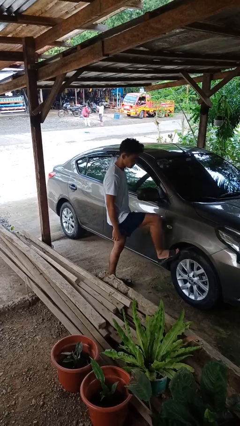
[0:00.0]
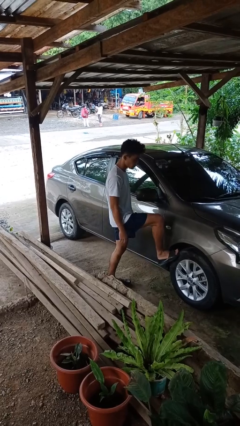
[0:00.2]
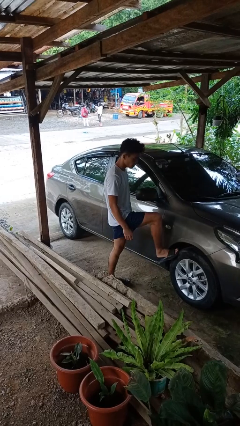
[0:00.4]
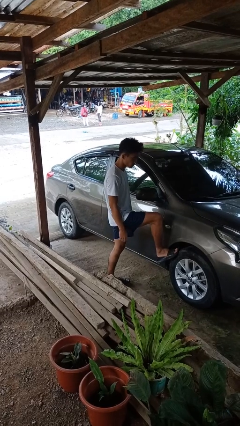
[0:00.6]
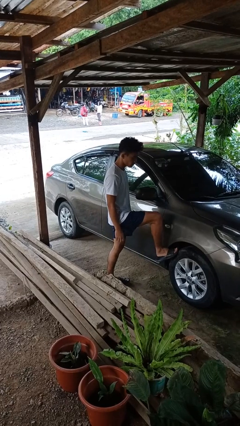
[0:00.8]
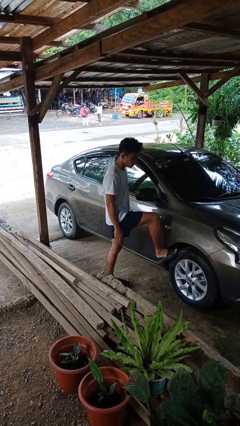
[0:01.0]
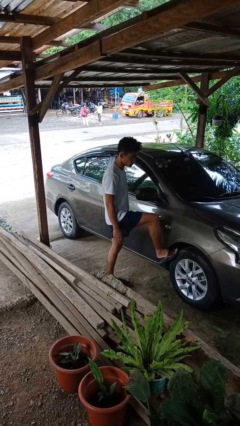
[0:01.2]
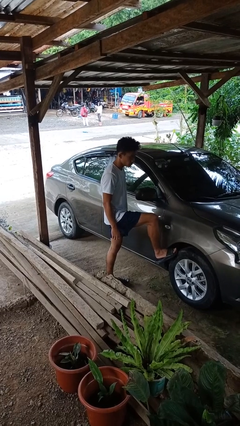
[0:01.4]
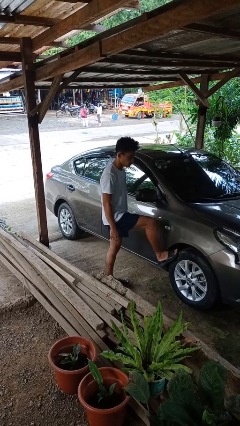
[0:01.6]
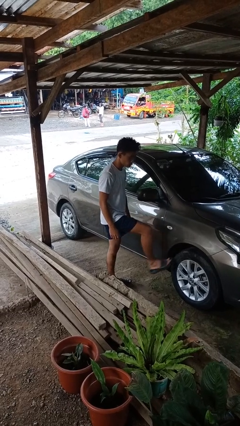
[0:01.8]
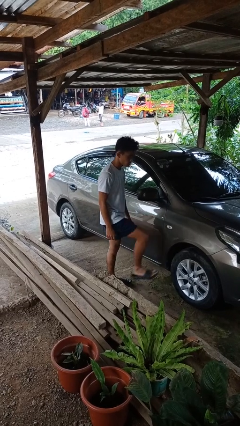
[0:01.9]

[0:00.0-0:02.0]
person kicks car tires

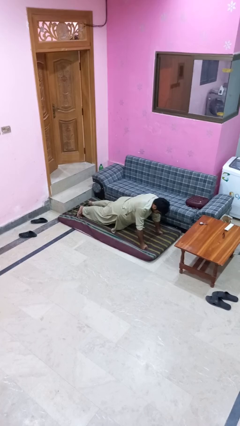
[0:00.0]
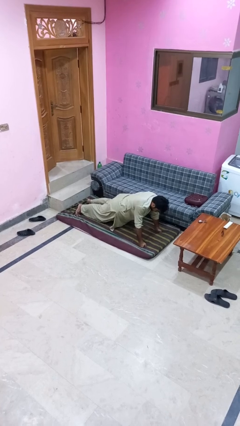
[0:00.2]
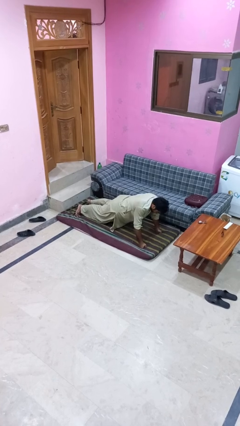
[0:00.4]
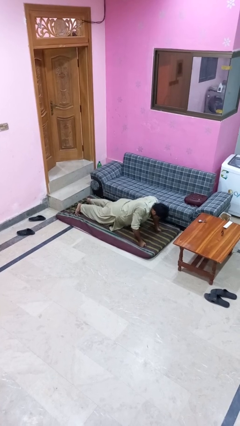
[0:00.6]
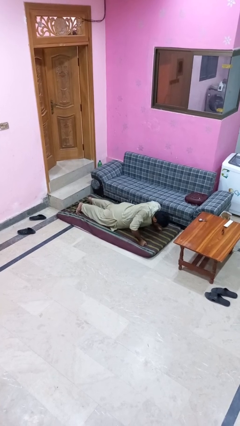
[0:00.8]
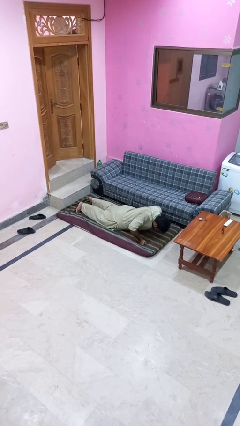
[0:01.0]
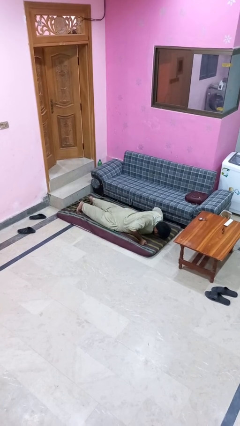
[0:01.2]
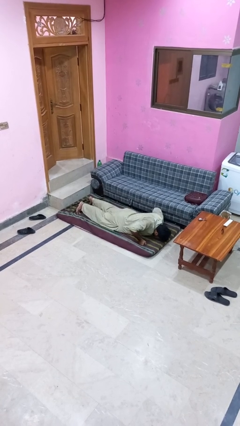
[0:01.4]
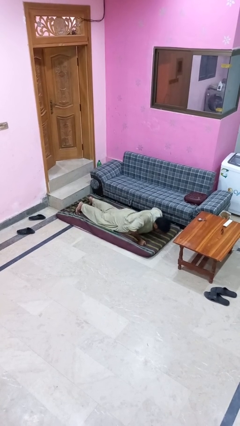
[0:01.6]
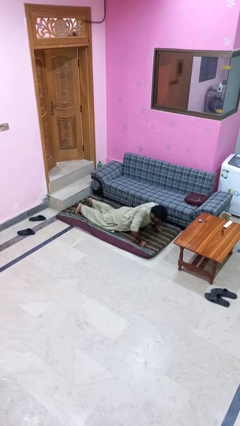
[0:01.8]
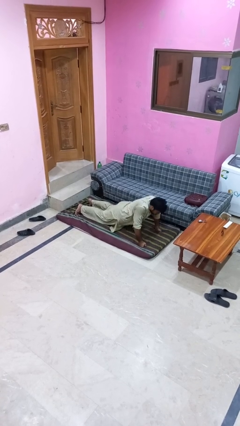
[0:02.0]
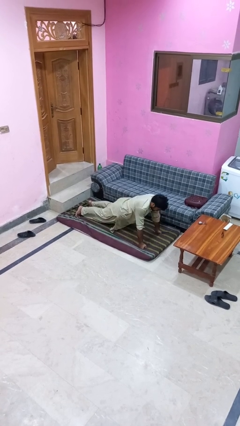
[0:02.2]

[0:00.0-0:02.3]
person exercises with pushup

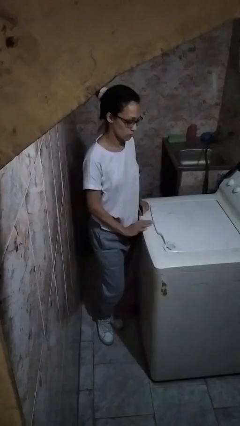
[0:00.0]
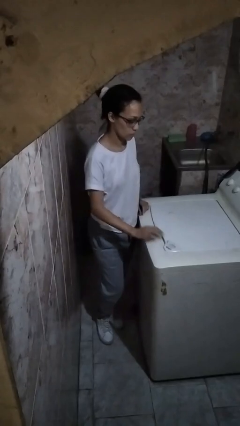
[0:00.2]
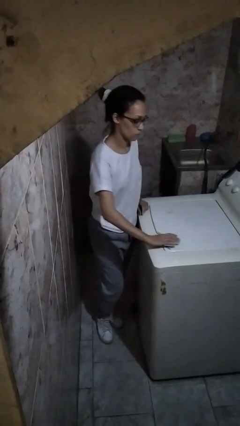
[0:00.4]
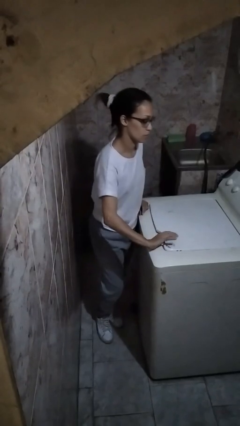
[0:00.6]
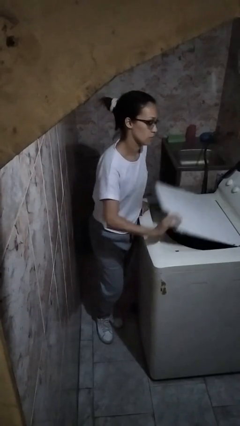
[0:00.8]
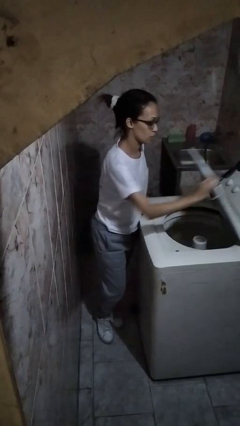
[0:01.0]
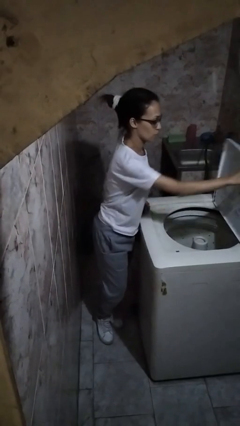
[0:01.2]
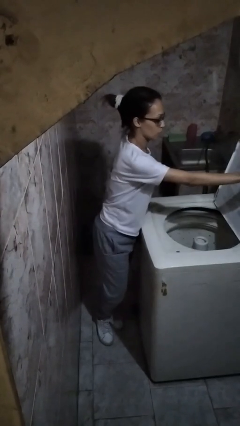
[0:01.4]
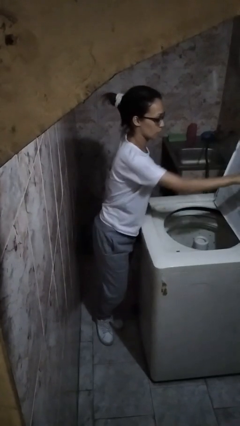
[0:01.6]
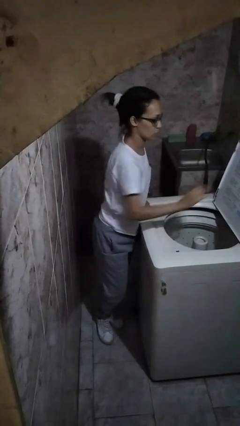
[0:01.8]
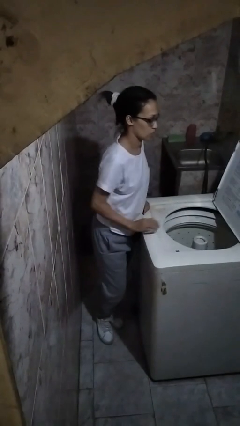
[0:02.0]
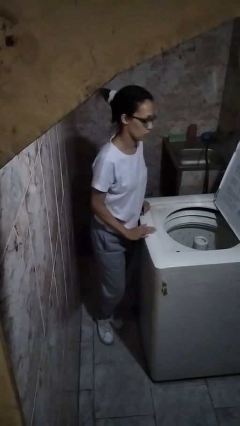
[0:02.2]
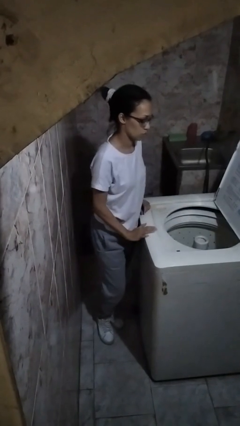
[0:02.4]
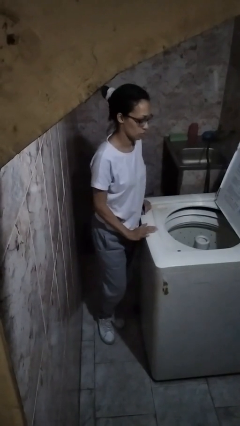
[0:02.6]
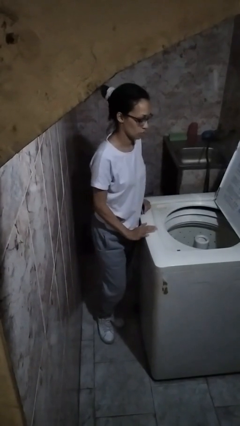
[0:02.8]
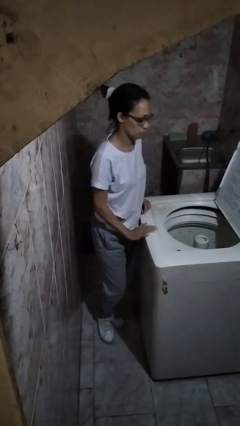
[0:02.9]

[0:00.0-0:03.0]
person opens clothes washer

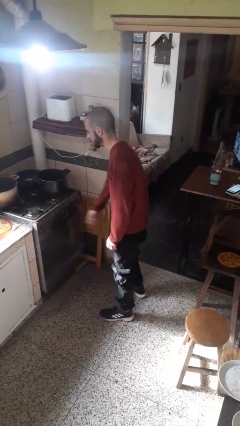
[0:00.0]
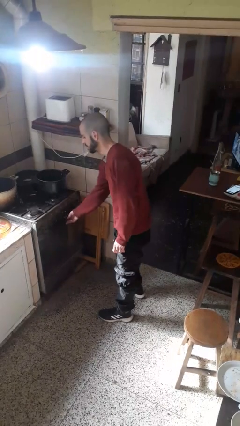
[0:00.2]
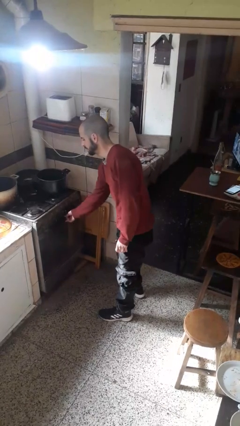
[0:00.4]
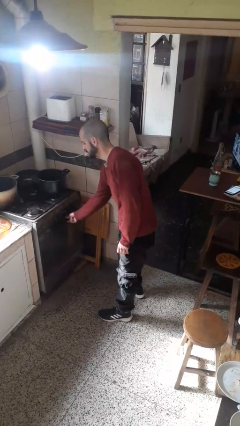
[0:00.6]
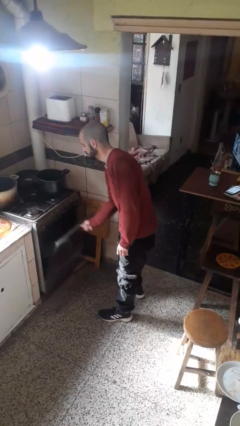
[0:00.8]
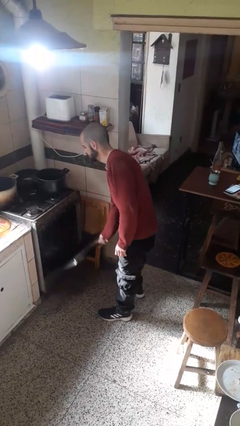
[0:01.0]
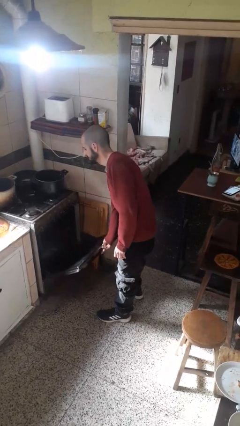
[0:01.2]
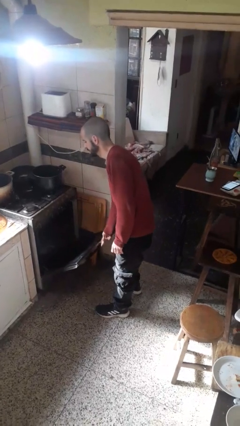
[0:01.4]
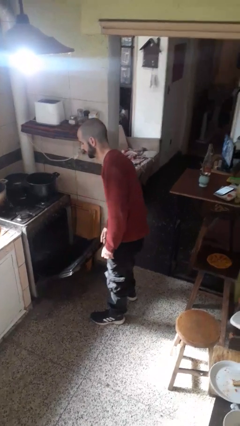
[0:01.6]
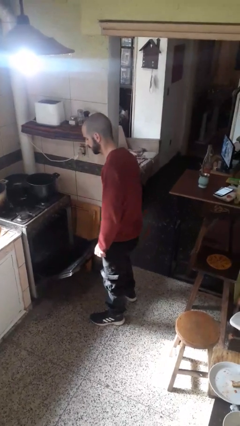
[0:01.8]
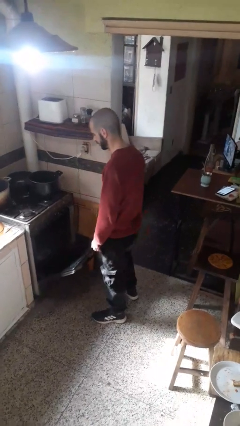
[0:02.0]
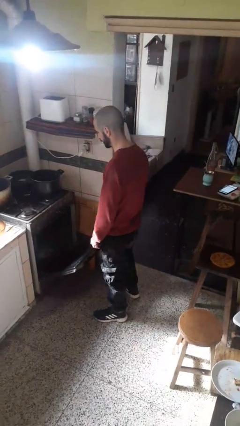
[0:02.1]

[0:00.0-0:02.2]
person opens oven door

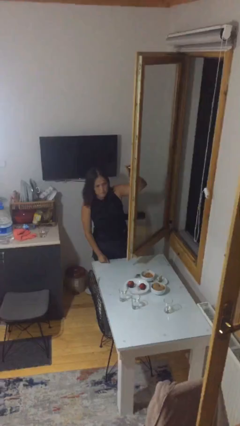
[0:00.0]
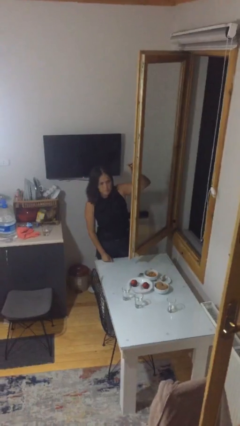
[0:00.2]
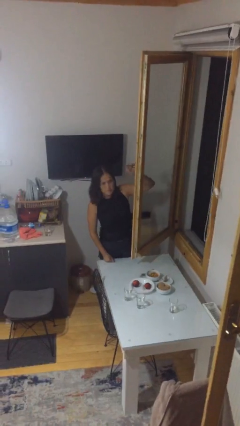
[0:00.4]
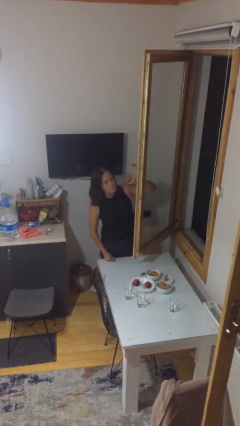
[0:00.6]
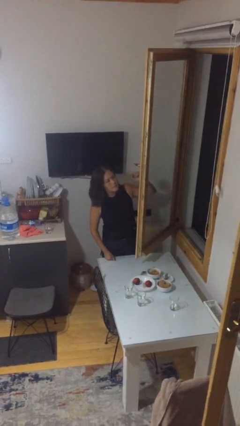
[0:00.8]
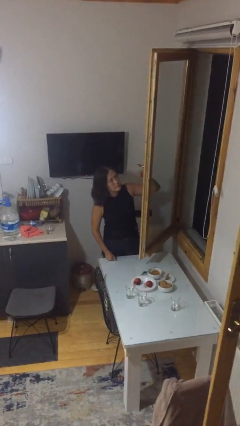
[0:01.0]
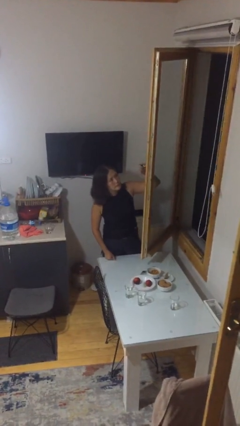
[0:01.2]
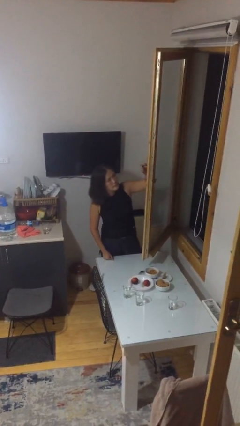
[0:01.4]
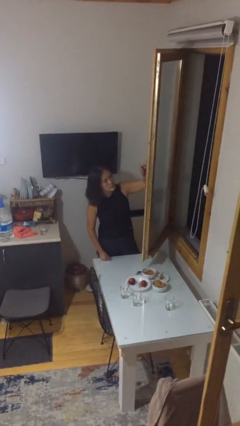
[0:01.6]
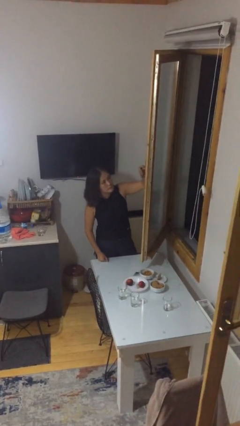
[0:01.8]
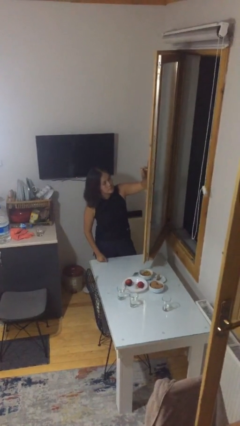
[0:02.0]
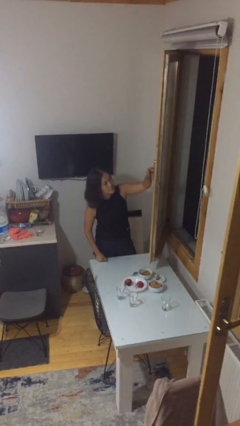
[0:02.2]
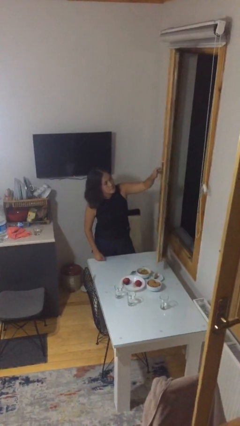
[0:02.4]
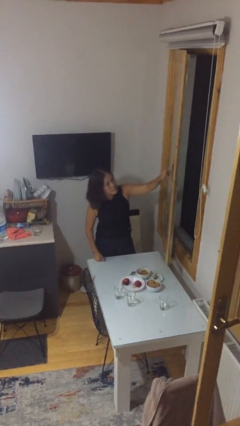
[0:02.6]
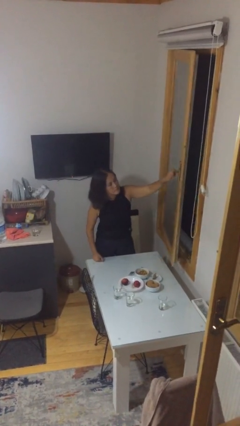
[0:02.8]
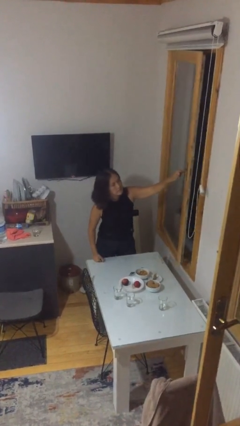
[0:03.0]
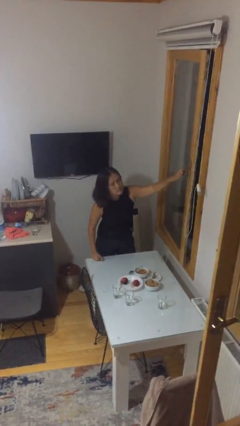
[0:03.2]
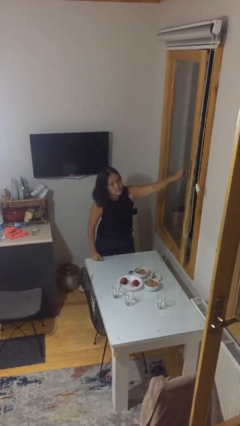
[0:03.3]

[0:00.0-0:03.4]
person closes home window

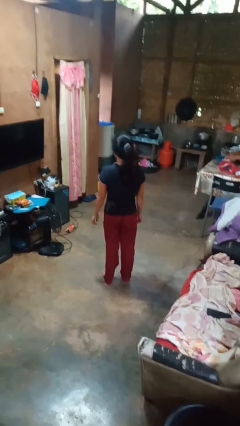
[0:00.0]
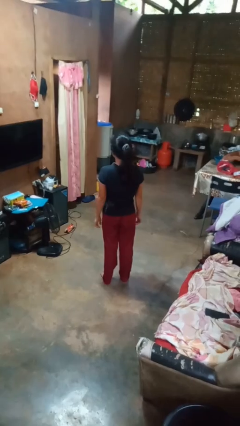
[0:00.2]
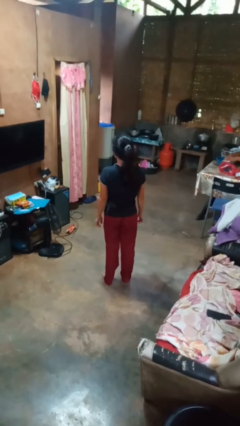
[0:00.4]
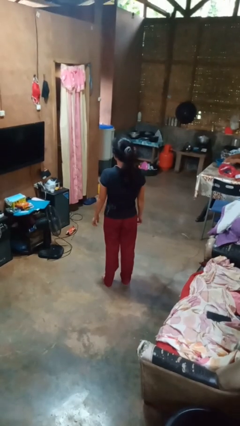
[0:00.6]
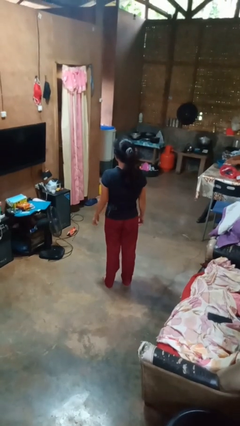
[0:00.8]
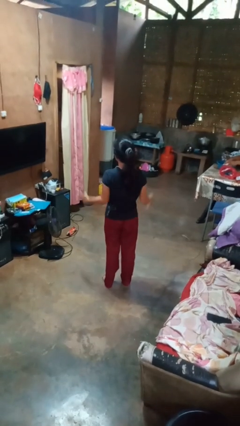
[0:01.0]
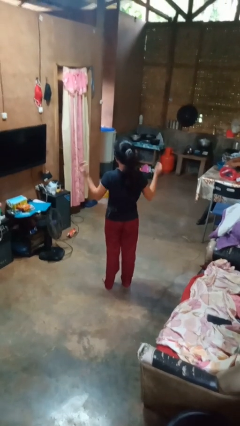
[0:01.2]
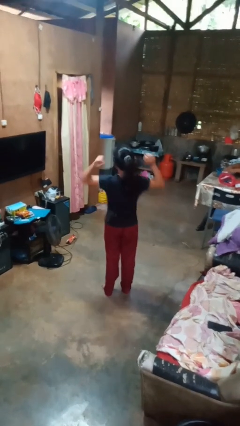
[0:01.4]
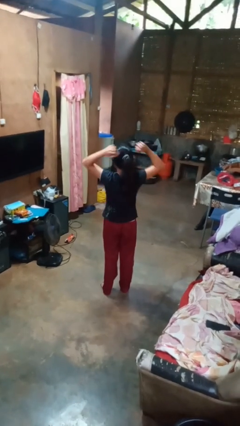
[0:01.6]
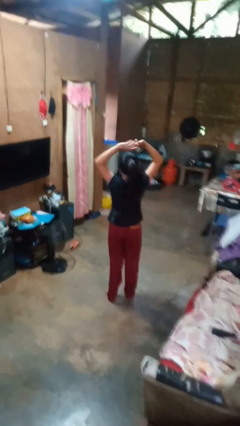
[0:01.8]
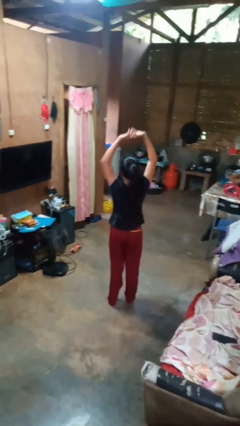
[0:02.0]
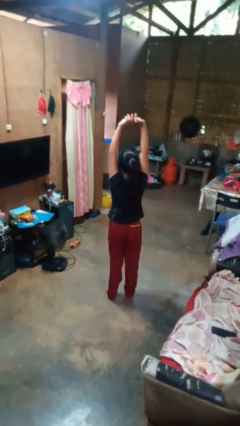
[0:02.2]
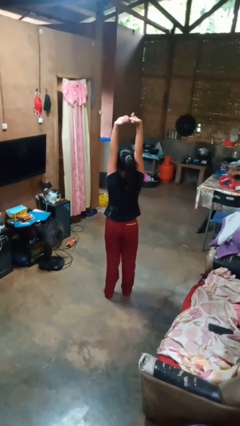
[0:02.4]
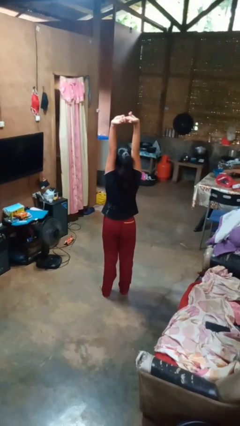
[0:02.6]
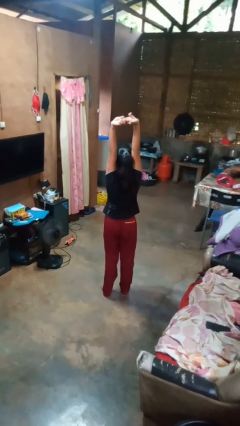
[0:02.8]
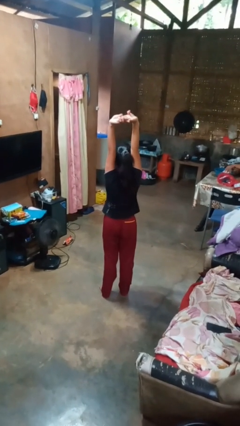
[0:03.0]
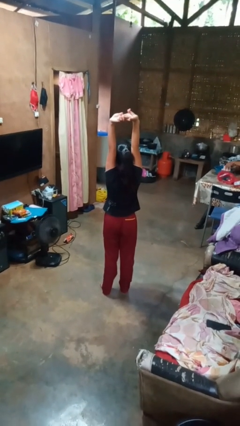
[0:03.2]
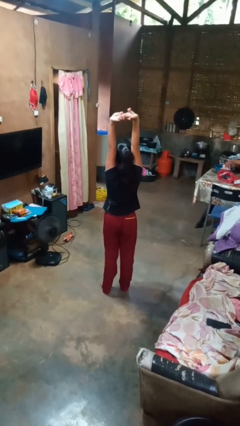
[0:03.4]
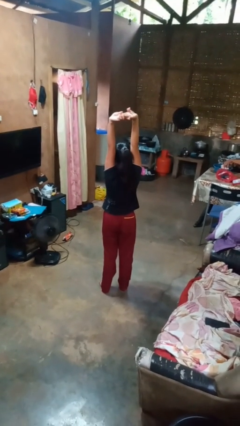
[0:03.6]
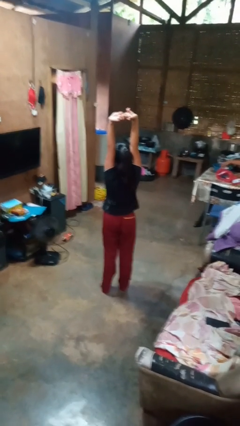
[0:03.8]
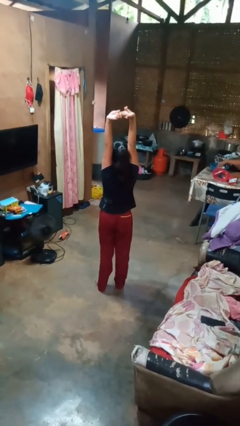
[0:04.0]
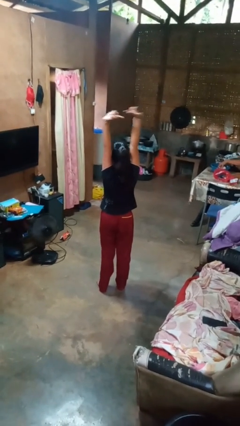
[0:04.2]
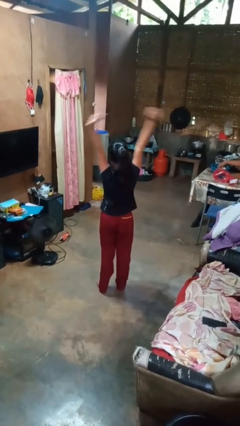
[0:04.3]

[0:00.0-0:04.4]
person stretches arms over head
